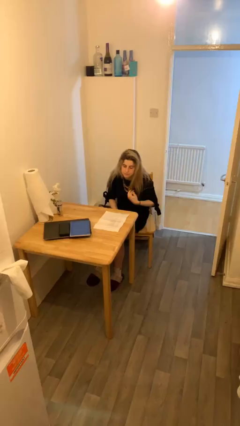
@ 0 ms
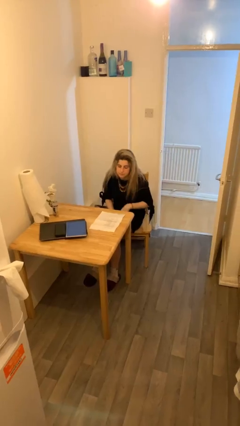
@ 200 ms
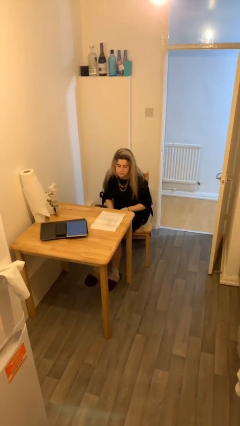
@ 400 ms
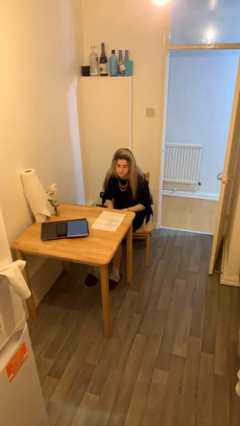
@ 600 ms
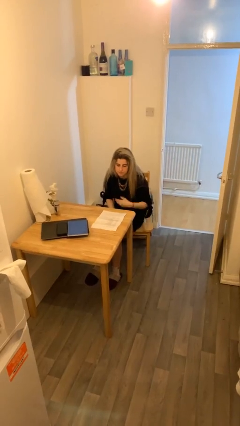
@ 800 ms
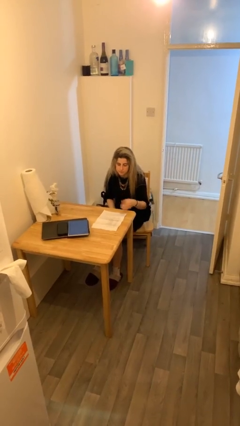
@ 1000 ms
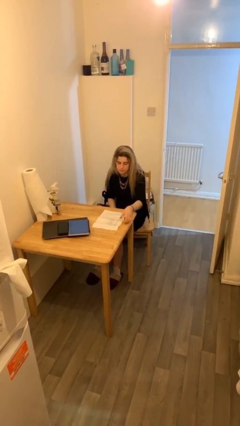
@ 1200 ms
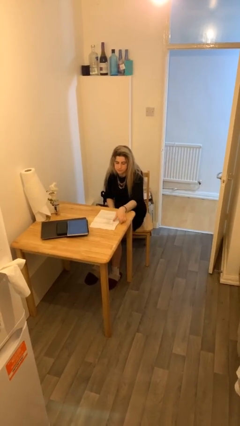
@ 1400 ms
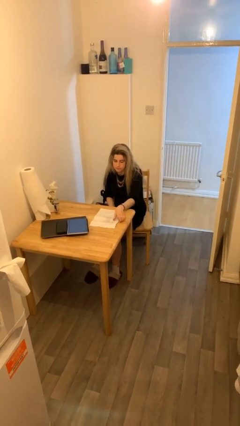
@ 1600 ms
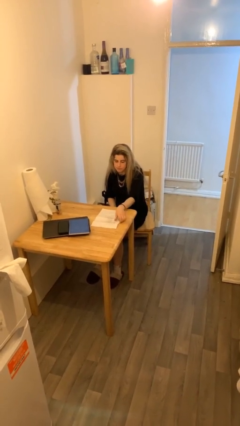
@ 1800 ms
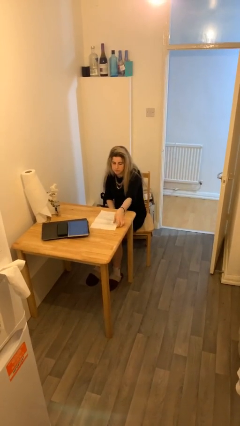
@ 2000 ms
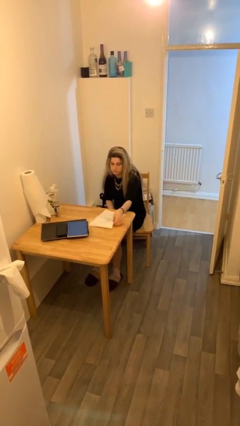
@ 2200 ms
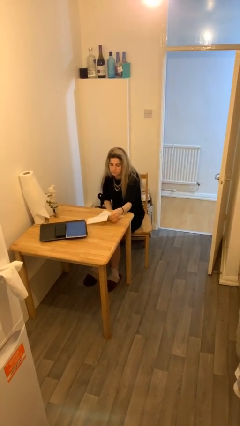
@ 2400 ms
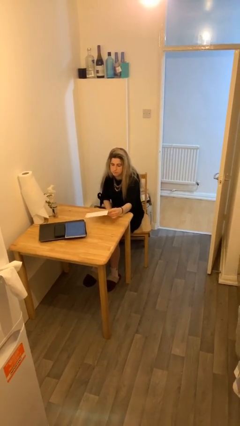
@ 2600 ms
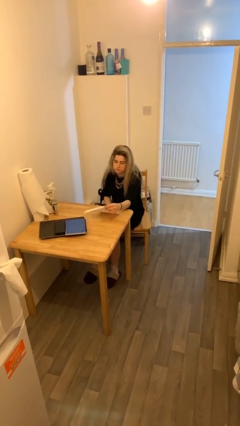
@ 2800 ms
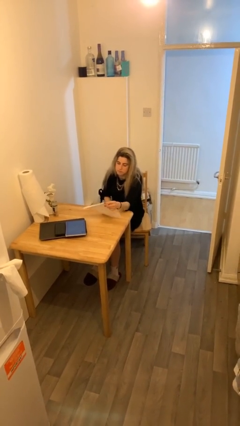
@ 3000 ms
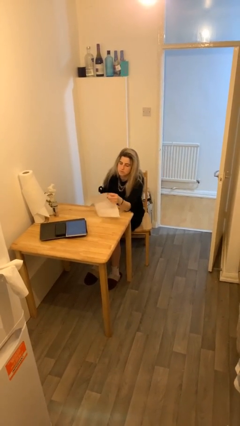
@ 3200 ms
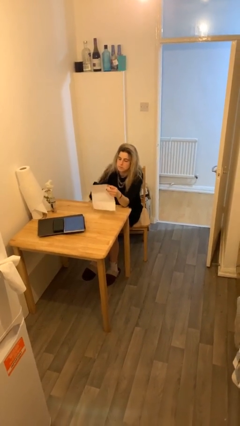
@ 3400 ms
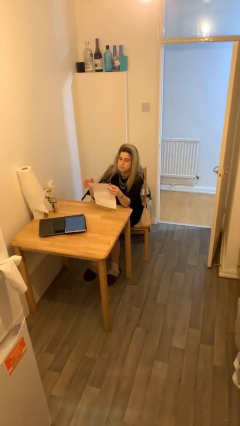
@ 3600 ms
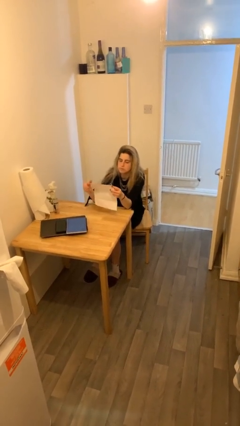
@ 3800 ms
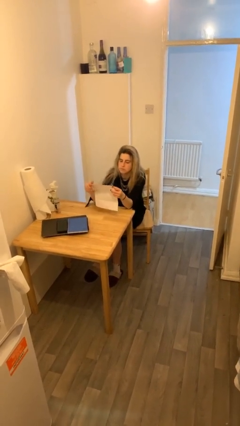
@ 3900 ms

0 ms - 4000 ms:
person picks up object from table

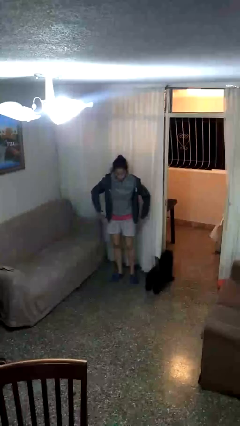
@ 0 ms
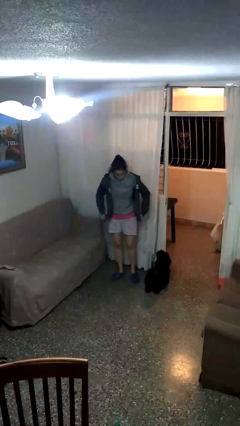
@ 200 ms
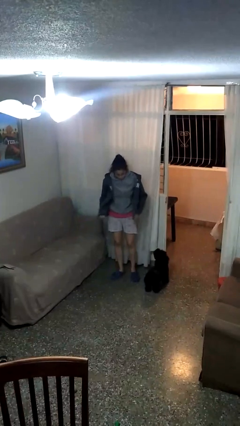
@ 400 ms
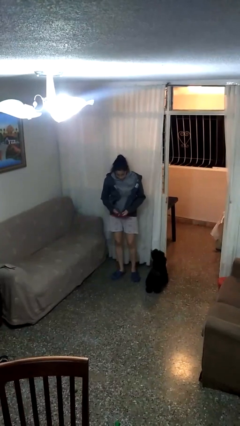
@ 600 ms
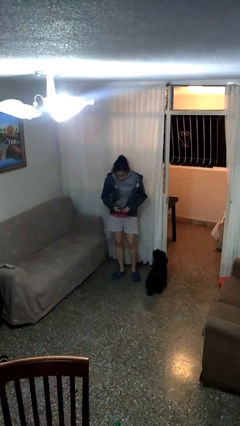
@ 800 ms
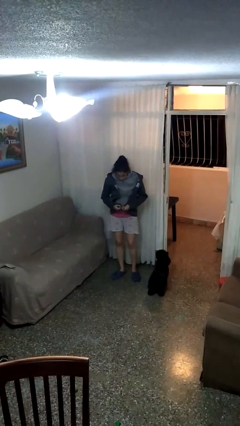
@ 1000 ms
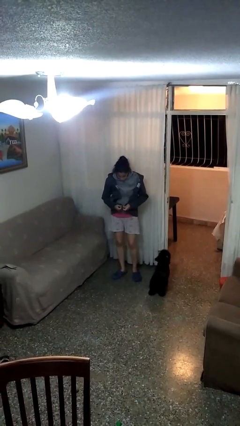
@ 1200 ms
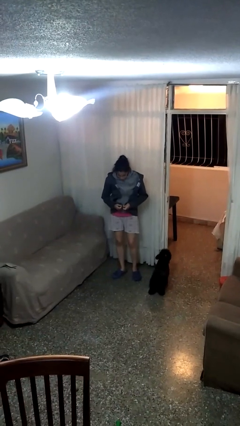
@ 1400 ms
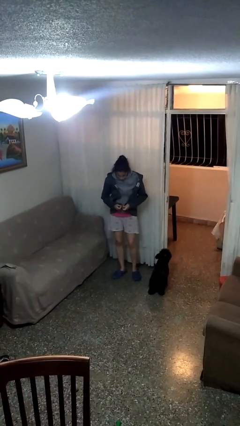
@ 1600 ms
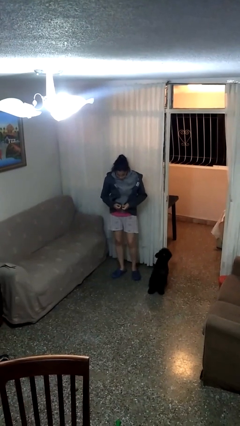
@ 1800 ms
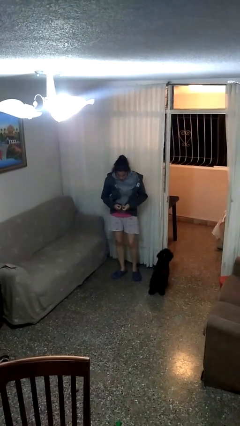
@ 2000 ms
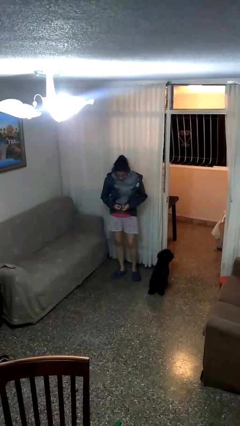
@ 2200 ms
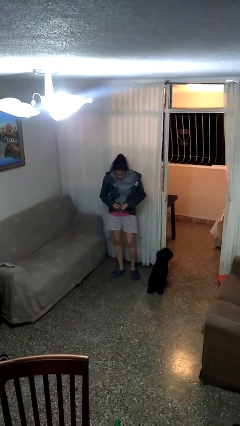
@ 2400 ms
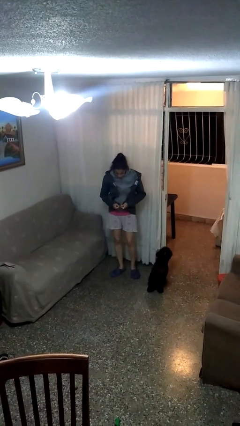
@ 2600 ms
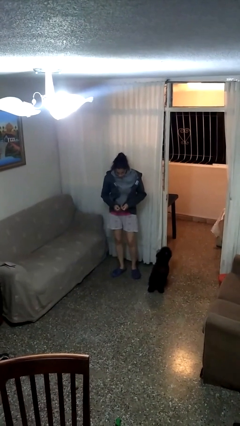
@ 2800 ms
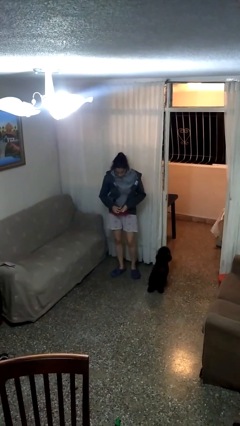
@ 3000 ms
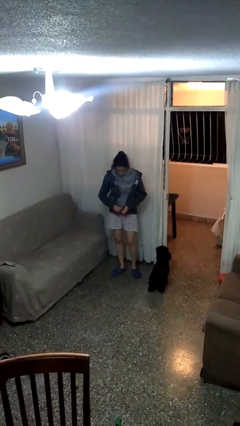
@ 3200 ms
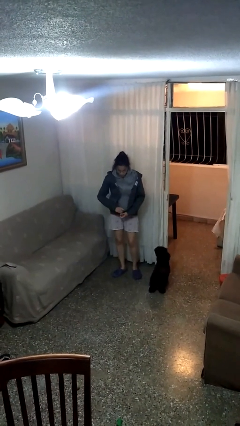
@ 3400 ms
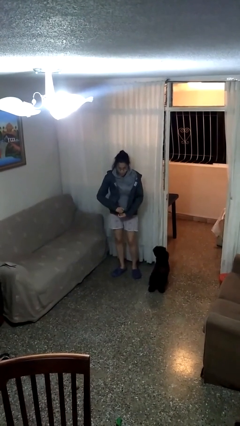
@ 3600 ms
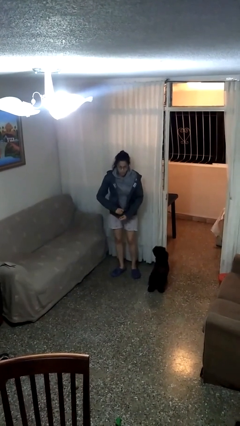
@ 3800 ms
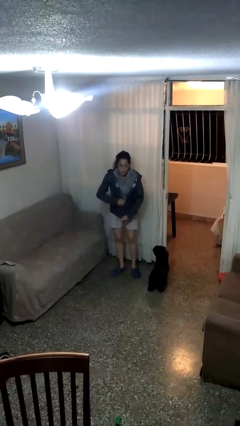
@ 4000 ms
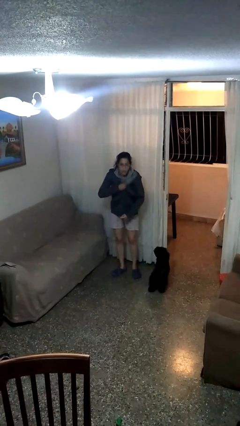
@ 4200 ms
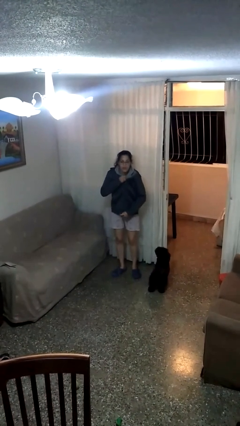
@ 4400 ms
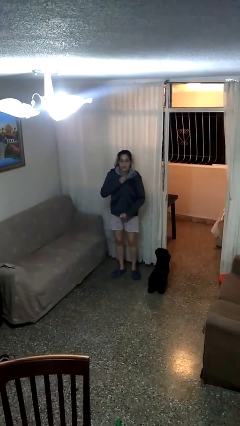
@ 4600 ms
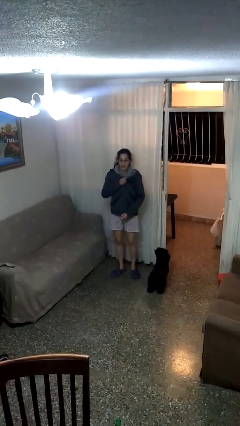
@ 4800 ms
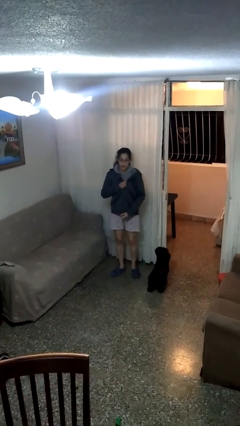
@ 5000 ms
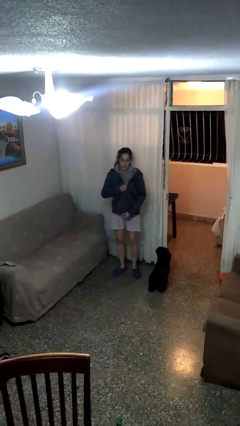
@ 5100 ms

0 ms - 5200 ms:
person zips up jacket

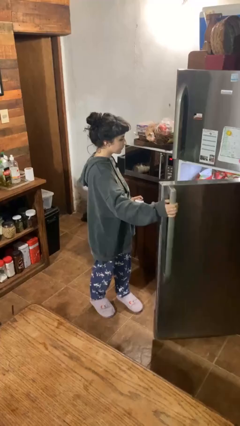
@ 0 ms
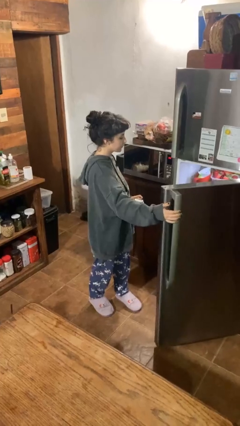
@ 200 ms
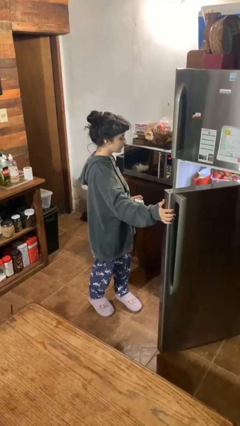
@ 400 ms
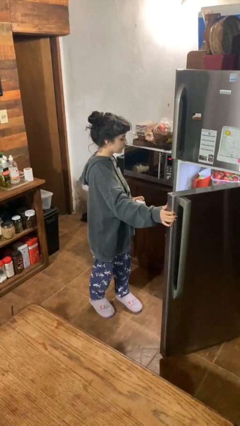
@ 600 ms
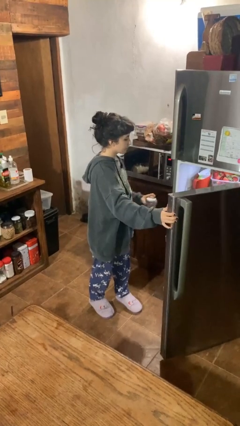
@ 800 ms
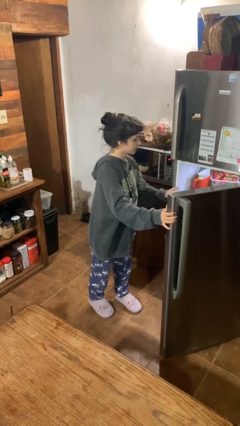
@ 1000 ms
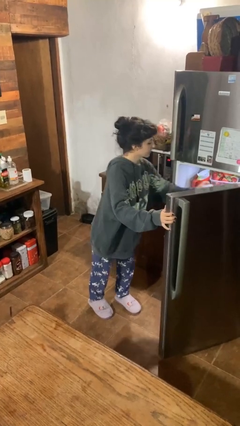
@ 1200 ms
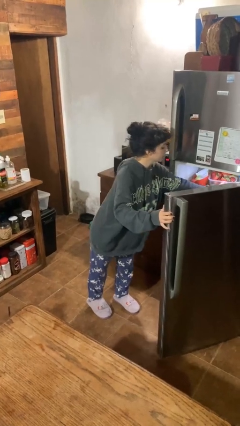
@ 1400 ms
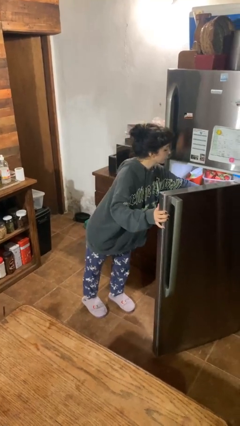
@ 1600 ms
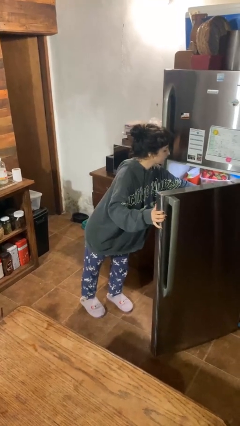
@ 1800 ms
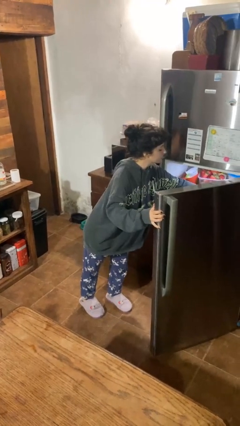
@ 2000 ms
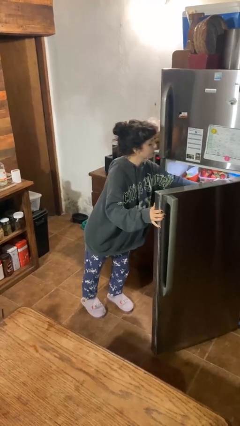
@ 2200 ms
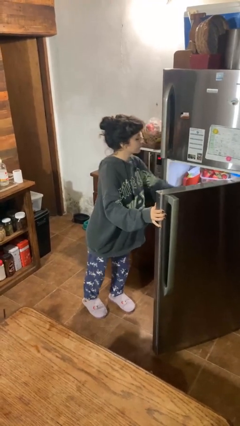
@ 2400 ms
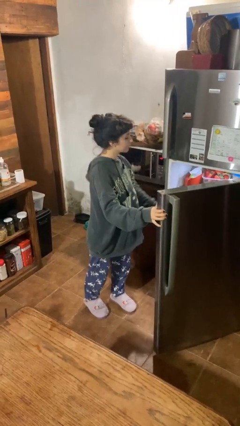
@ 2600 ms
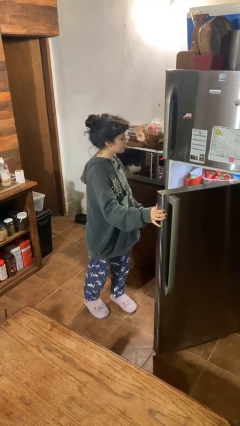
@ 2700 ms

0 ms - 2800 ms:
person puts object into refrigerator

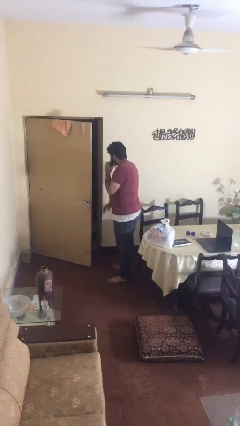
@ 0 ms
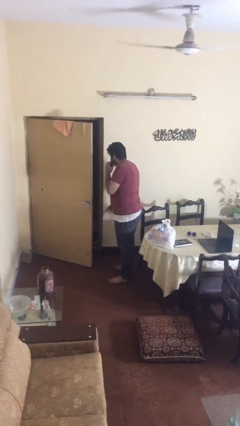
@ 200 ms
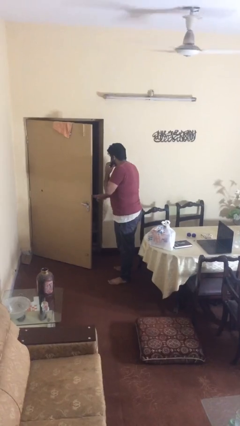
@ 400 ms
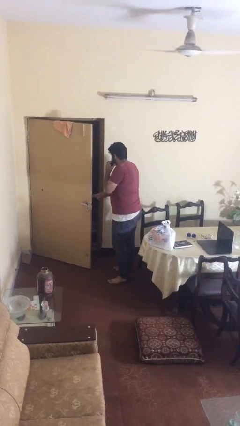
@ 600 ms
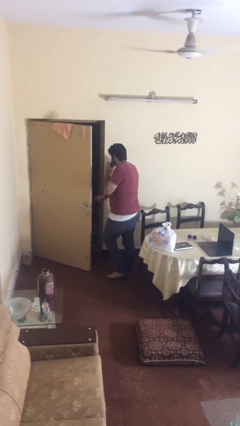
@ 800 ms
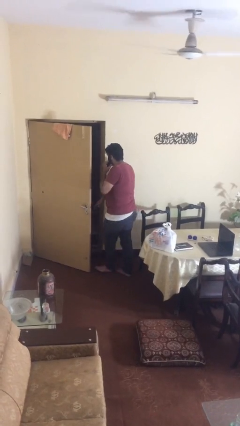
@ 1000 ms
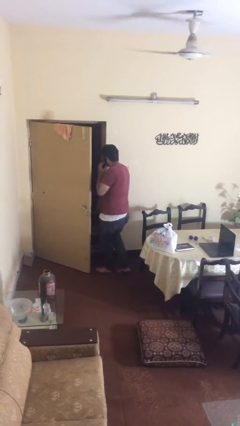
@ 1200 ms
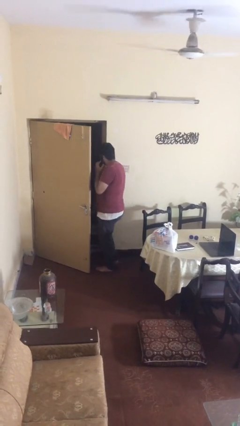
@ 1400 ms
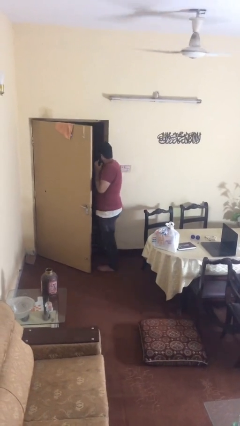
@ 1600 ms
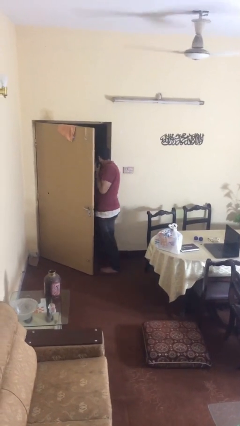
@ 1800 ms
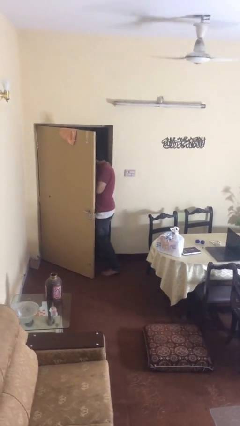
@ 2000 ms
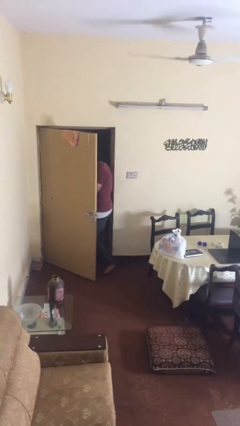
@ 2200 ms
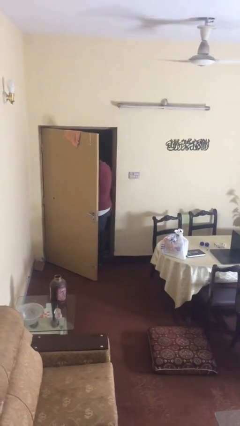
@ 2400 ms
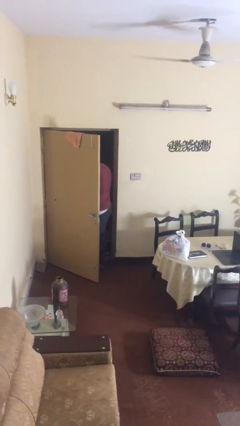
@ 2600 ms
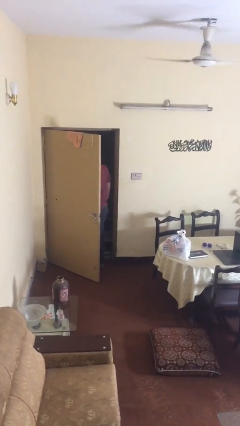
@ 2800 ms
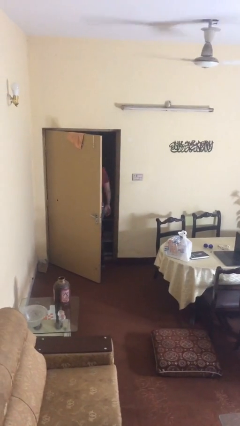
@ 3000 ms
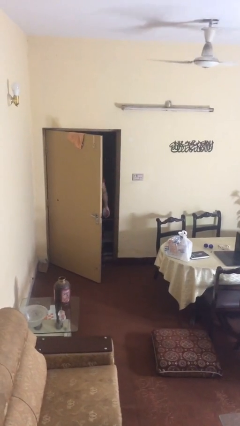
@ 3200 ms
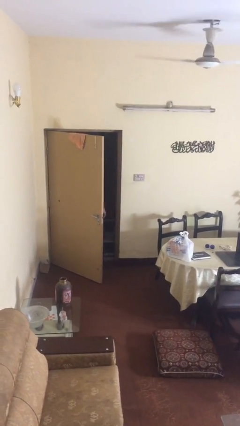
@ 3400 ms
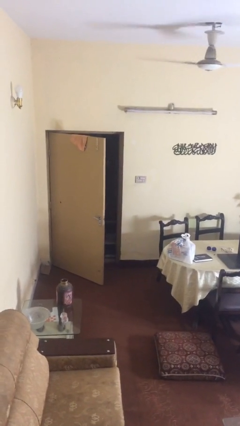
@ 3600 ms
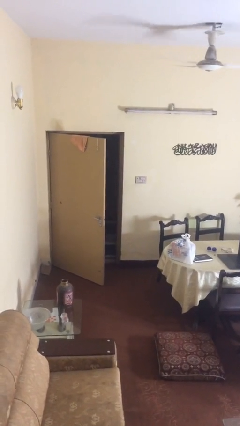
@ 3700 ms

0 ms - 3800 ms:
person exits scene through structure

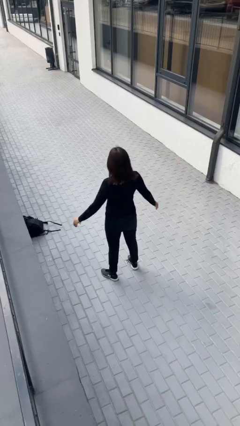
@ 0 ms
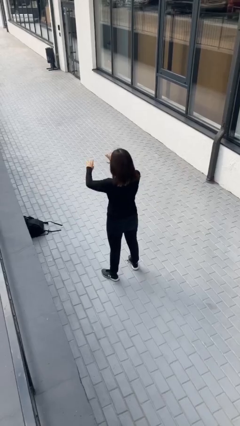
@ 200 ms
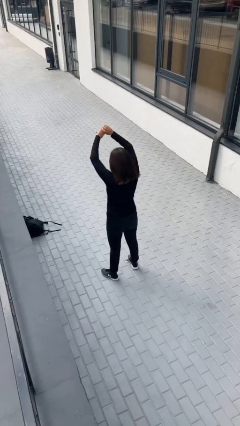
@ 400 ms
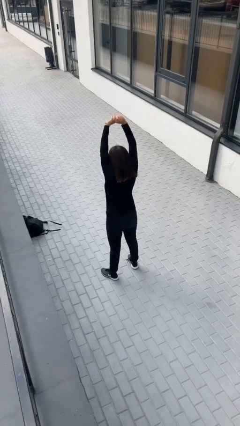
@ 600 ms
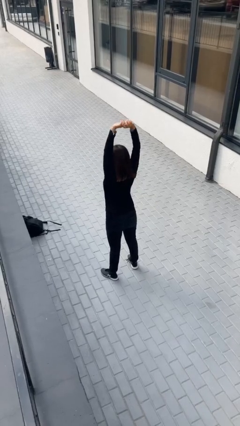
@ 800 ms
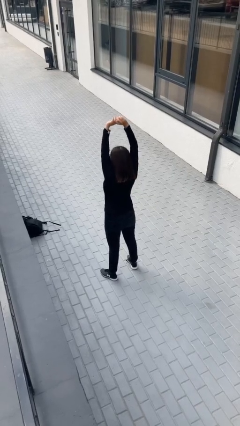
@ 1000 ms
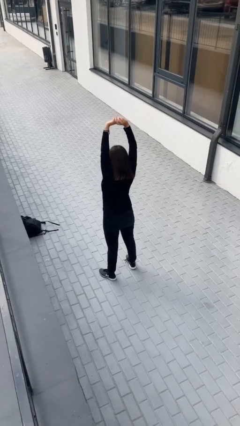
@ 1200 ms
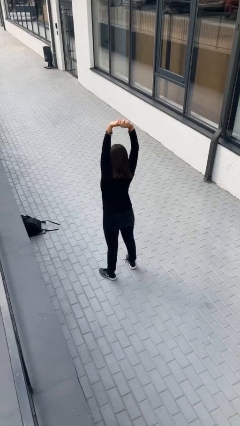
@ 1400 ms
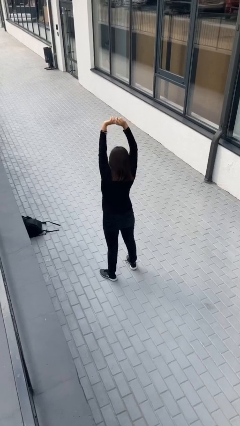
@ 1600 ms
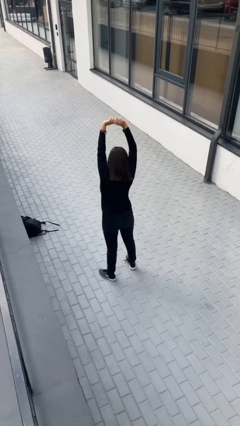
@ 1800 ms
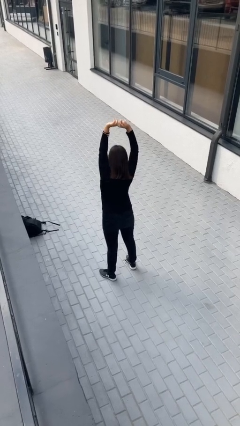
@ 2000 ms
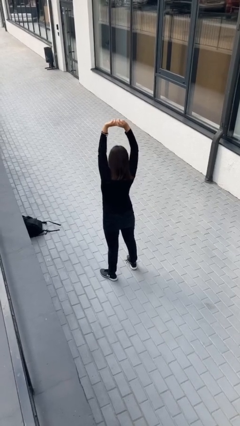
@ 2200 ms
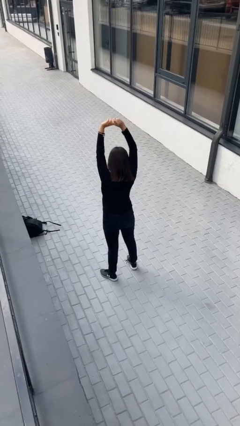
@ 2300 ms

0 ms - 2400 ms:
person stretches arms over head
